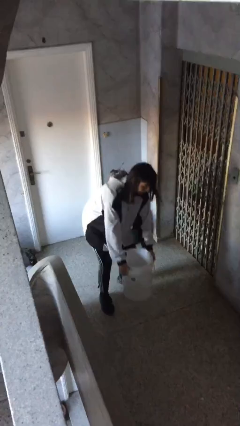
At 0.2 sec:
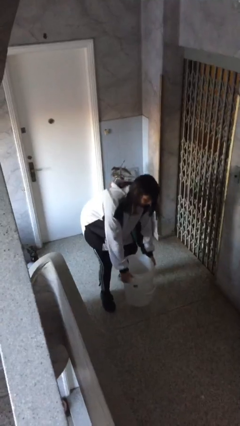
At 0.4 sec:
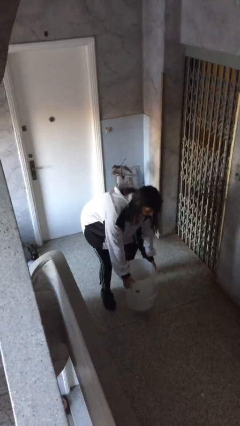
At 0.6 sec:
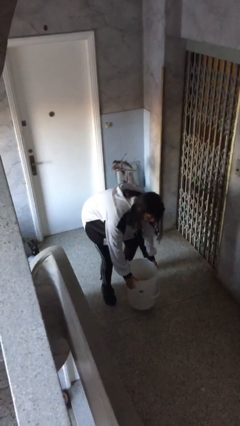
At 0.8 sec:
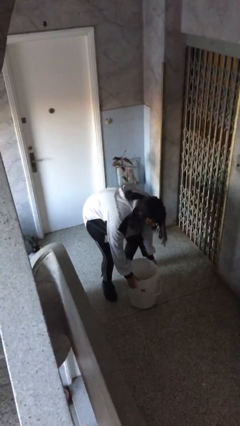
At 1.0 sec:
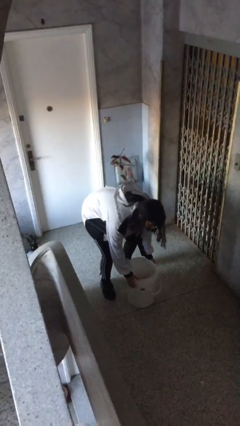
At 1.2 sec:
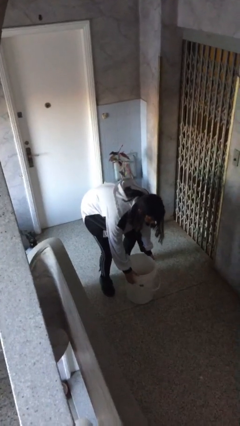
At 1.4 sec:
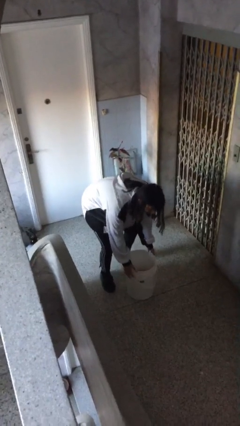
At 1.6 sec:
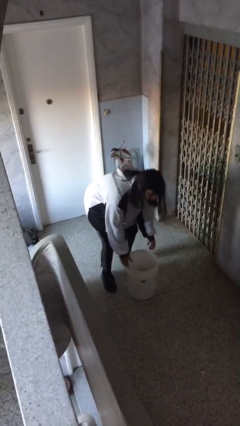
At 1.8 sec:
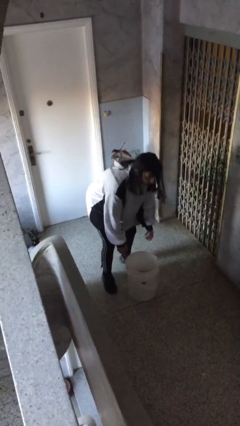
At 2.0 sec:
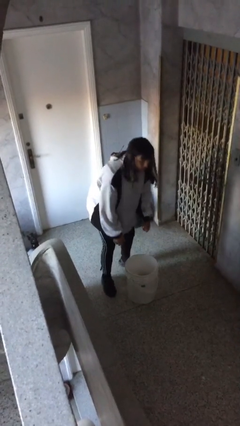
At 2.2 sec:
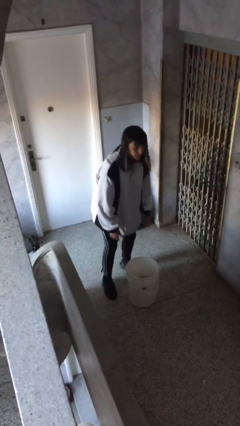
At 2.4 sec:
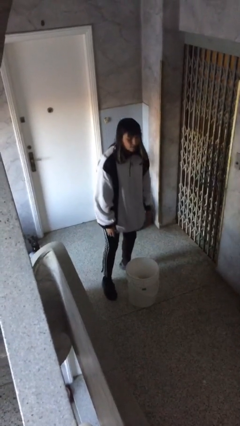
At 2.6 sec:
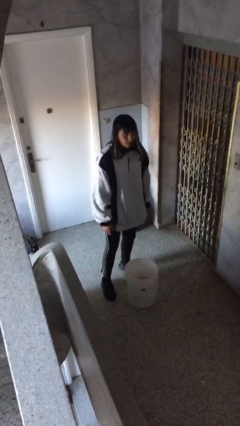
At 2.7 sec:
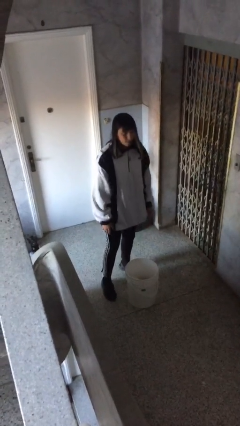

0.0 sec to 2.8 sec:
person puts down object on floor

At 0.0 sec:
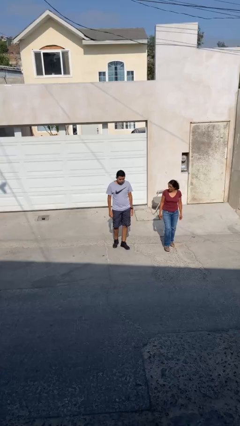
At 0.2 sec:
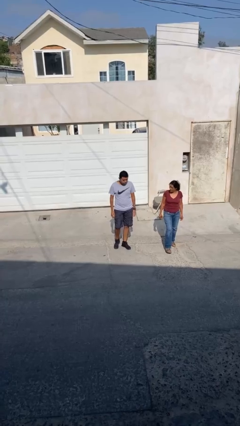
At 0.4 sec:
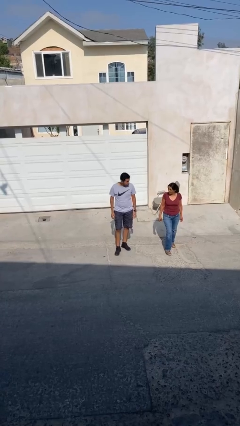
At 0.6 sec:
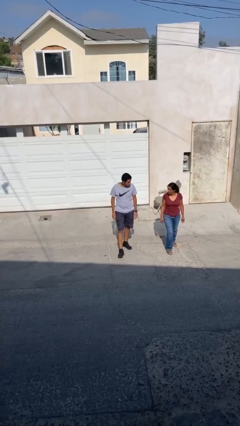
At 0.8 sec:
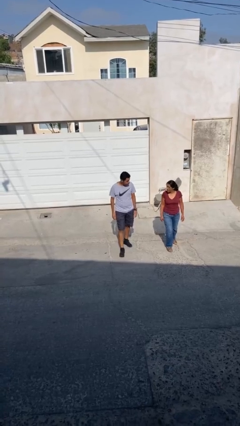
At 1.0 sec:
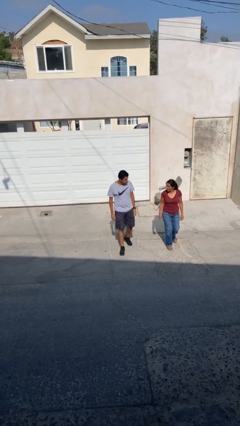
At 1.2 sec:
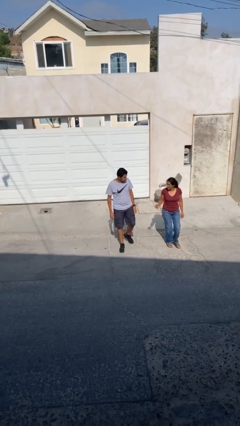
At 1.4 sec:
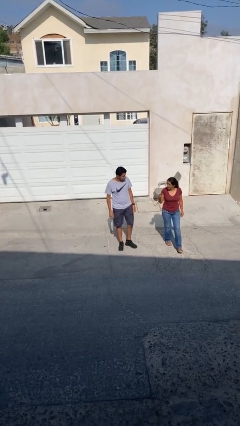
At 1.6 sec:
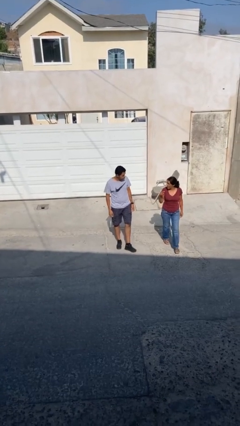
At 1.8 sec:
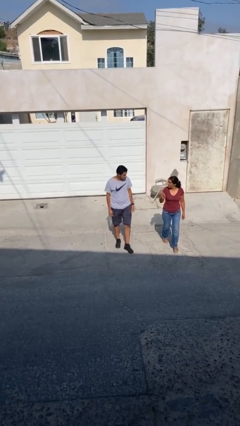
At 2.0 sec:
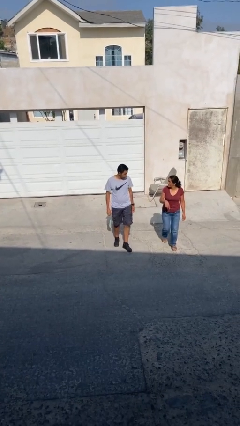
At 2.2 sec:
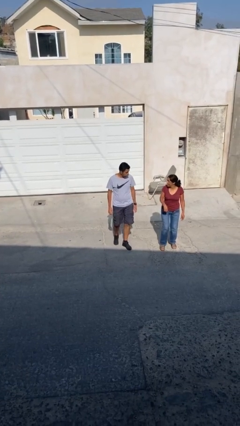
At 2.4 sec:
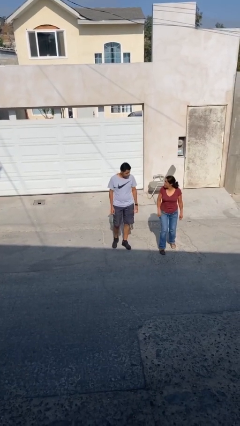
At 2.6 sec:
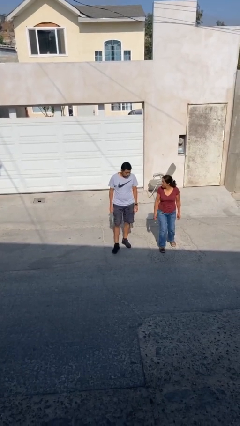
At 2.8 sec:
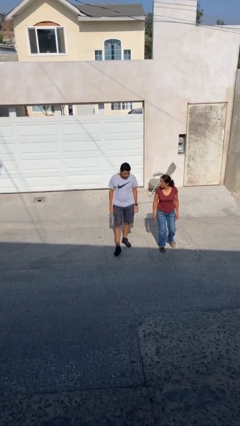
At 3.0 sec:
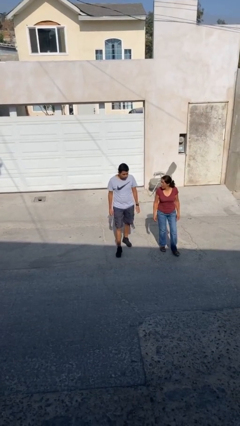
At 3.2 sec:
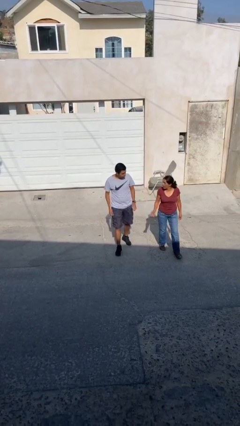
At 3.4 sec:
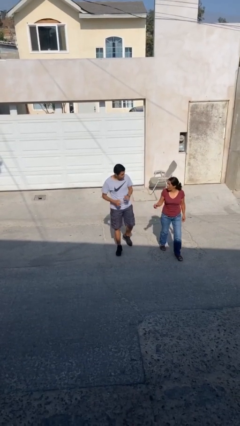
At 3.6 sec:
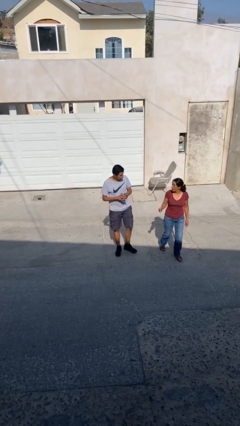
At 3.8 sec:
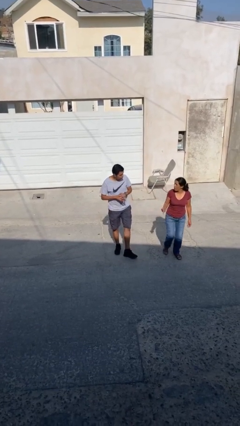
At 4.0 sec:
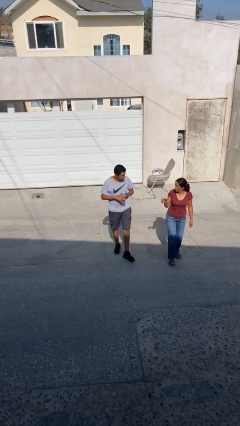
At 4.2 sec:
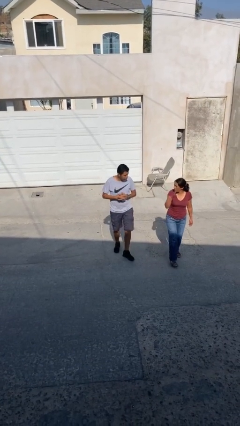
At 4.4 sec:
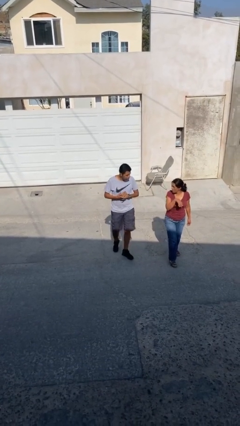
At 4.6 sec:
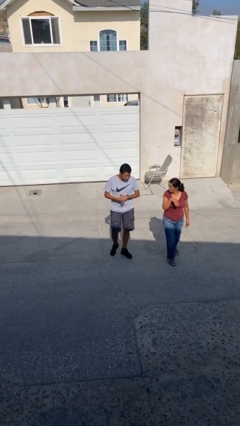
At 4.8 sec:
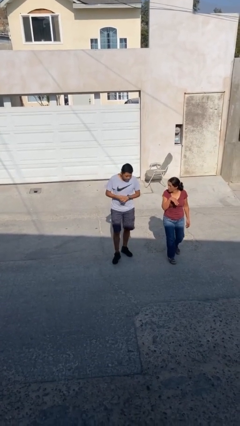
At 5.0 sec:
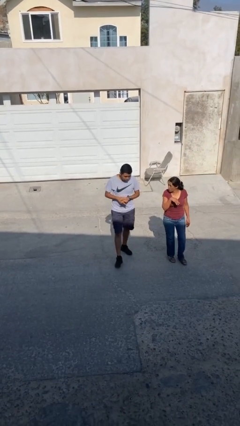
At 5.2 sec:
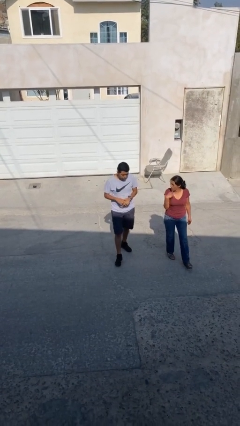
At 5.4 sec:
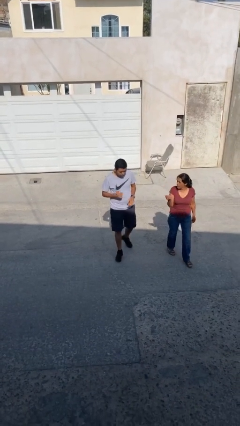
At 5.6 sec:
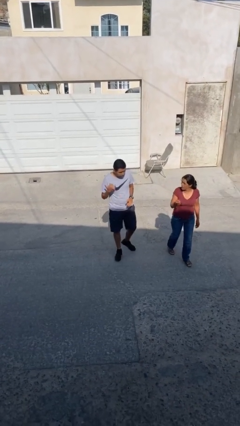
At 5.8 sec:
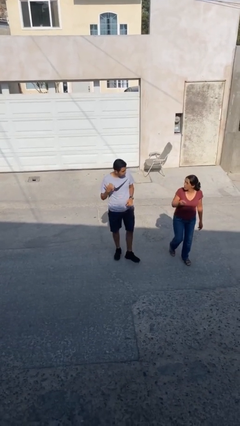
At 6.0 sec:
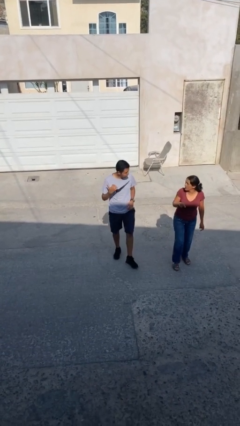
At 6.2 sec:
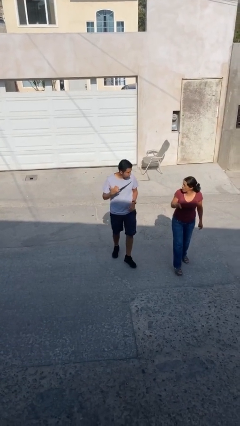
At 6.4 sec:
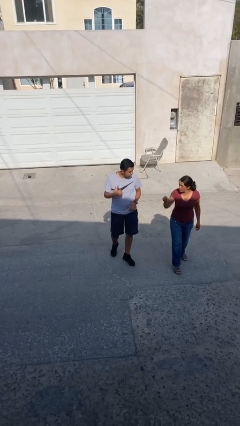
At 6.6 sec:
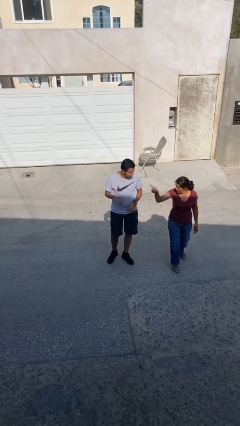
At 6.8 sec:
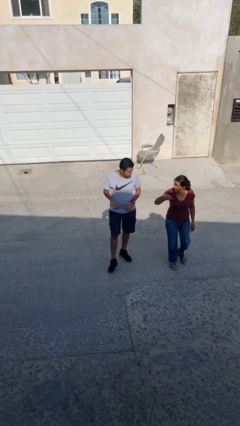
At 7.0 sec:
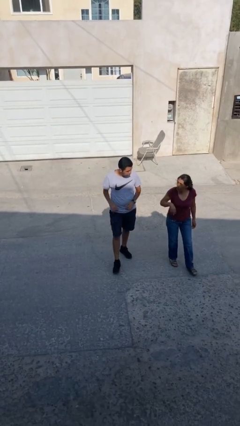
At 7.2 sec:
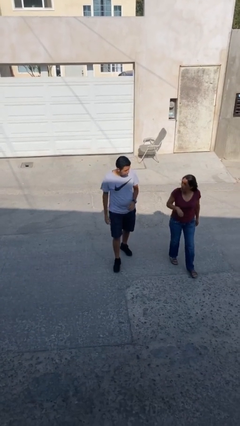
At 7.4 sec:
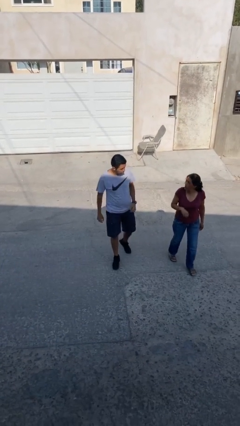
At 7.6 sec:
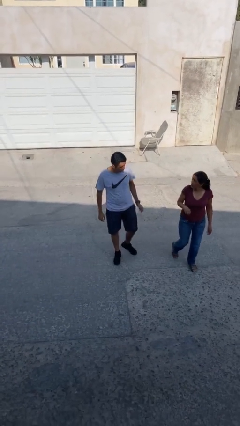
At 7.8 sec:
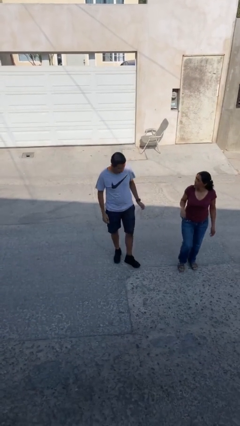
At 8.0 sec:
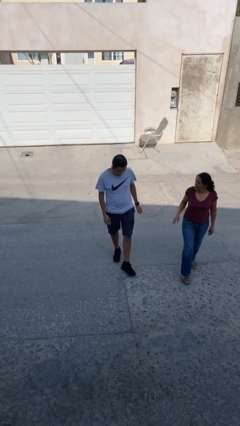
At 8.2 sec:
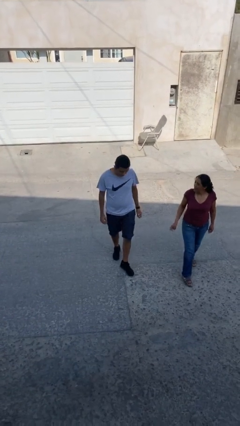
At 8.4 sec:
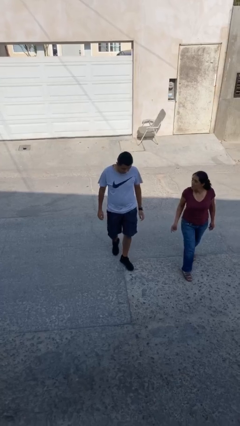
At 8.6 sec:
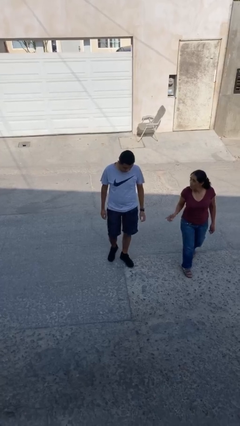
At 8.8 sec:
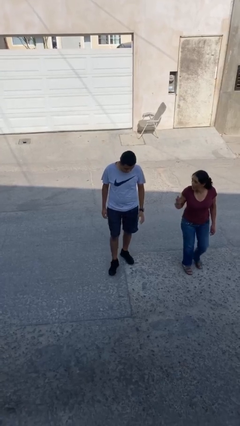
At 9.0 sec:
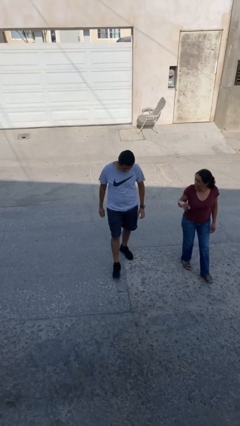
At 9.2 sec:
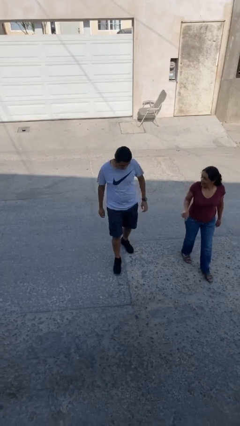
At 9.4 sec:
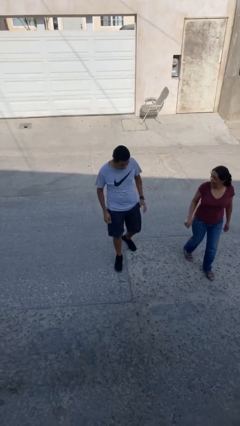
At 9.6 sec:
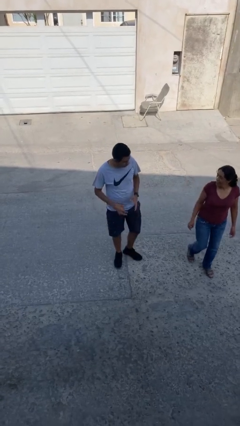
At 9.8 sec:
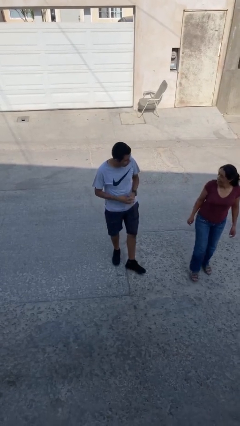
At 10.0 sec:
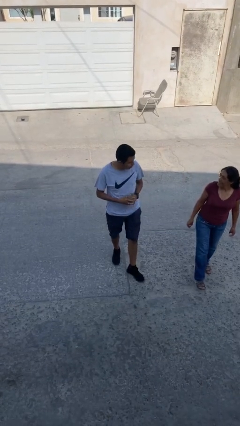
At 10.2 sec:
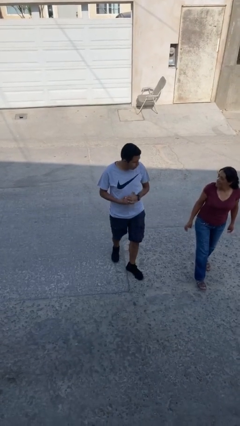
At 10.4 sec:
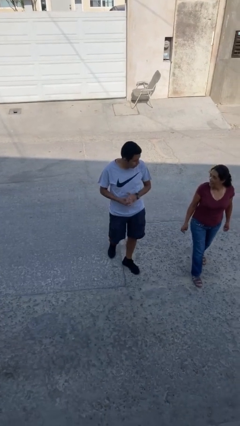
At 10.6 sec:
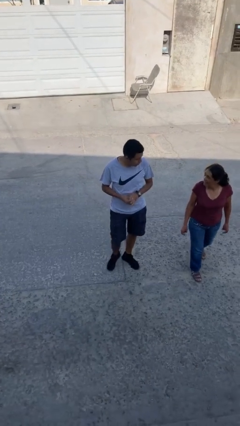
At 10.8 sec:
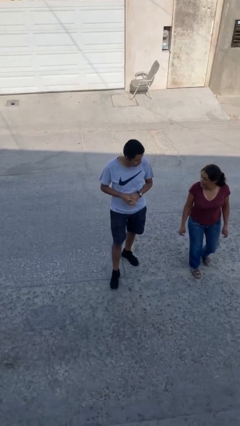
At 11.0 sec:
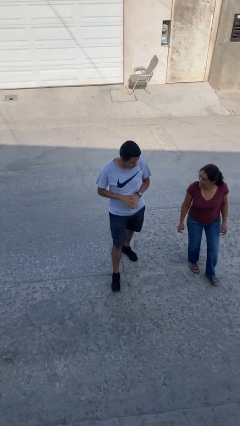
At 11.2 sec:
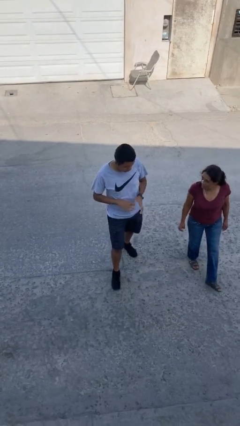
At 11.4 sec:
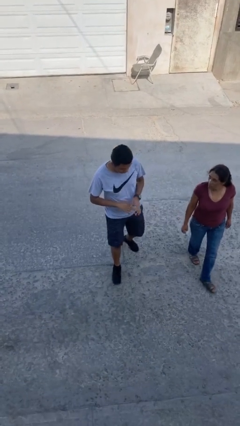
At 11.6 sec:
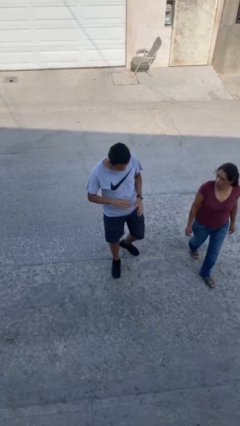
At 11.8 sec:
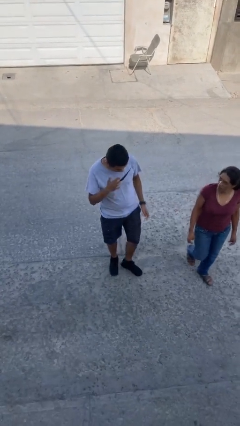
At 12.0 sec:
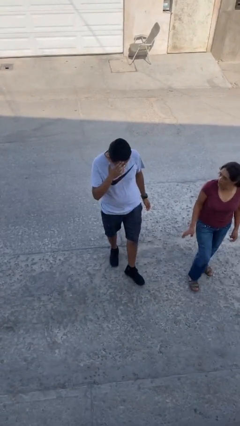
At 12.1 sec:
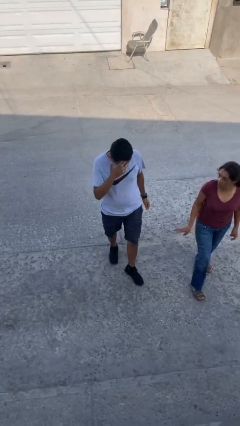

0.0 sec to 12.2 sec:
person talks to person

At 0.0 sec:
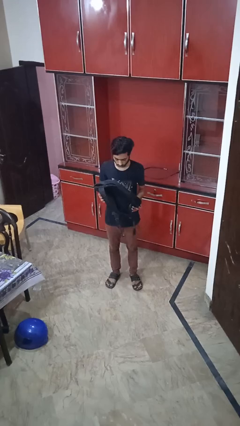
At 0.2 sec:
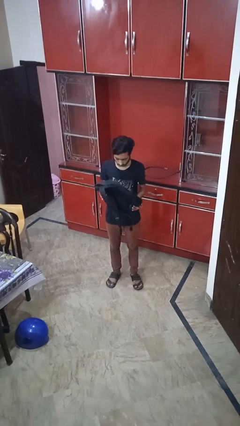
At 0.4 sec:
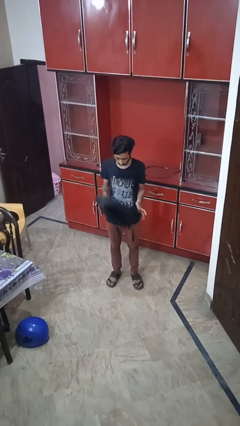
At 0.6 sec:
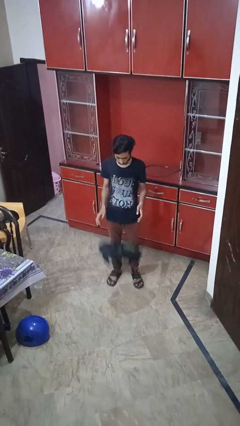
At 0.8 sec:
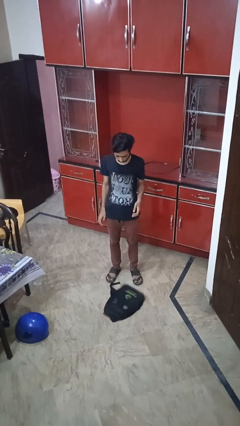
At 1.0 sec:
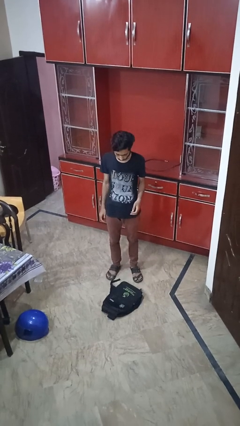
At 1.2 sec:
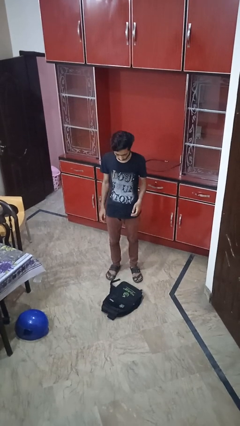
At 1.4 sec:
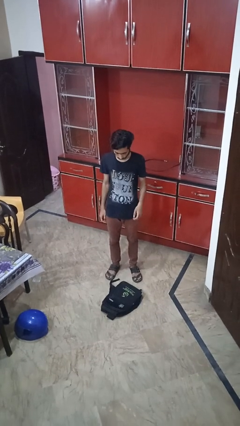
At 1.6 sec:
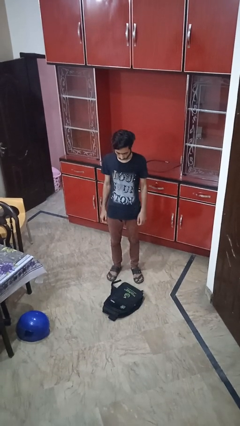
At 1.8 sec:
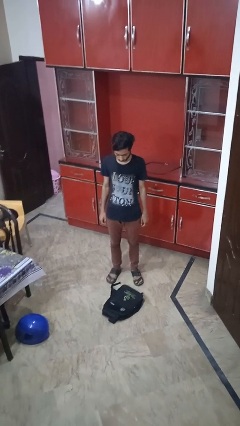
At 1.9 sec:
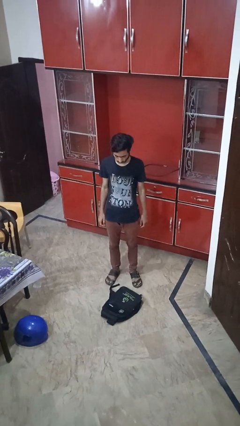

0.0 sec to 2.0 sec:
person drops object

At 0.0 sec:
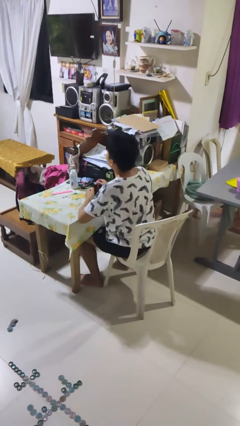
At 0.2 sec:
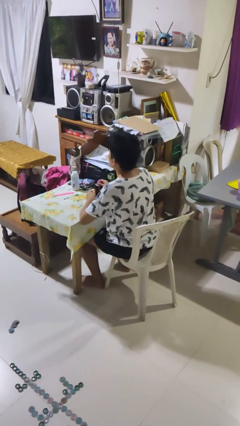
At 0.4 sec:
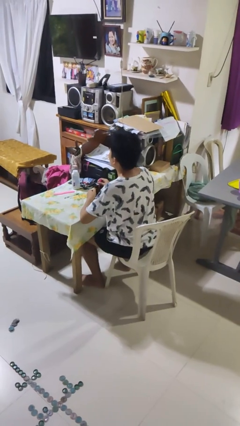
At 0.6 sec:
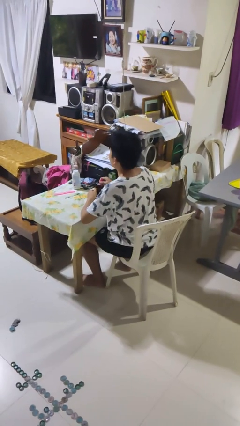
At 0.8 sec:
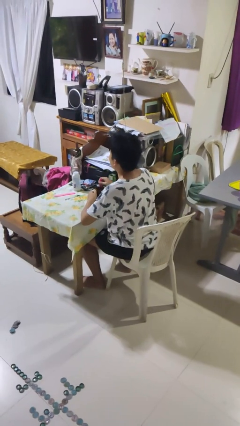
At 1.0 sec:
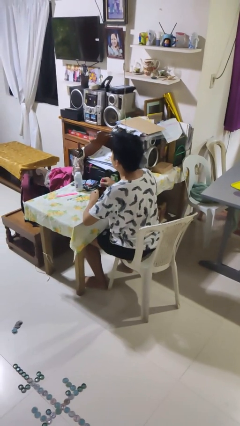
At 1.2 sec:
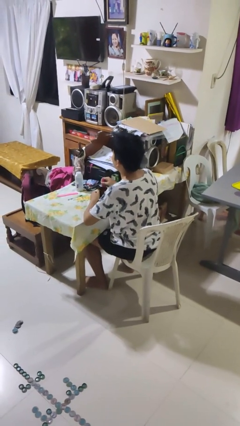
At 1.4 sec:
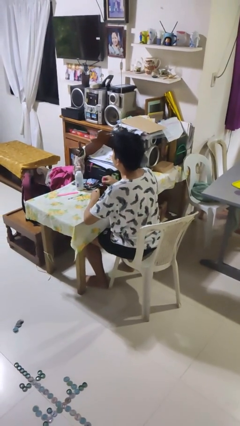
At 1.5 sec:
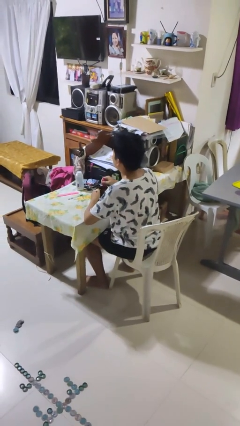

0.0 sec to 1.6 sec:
person stirs mug
